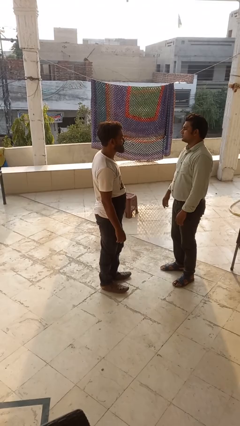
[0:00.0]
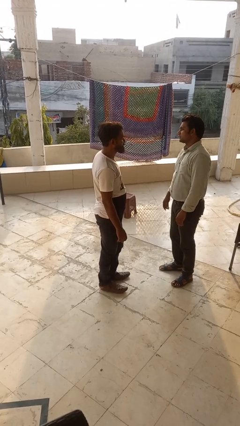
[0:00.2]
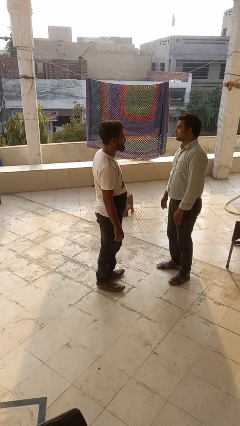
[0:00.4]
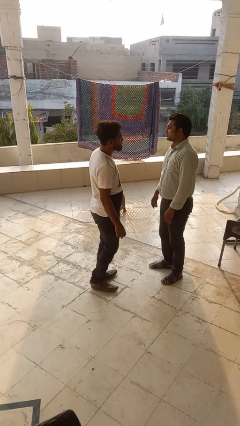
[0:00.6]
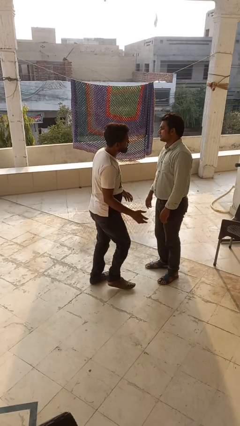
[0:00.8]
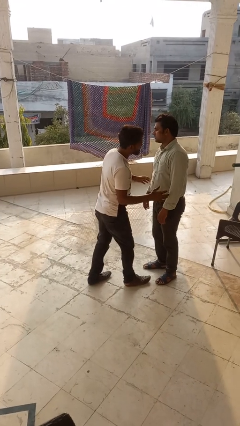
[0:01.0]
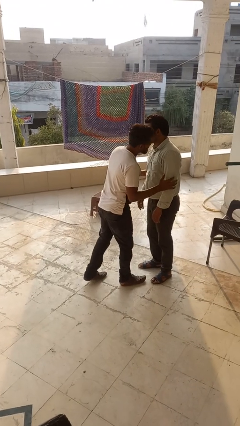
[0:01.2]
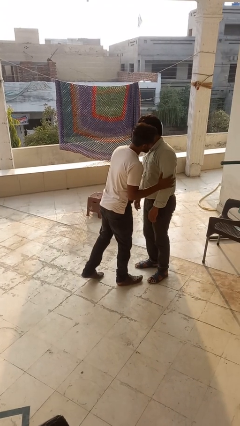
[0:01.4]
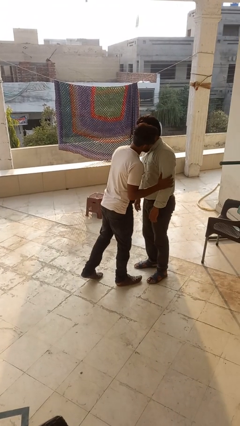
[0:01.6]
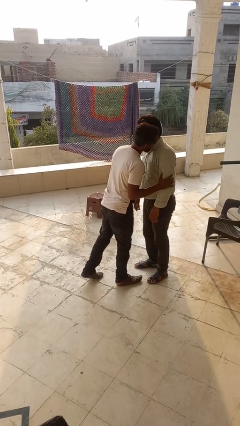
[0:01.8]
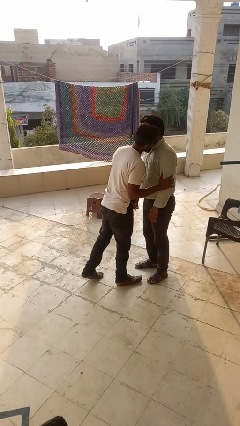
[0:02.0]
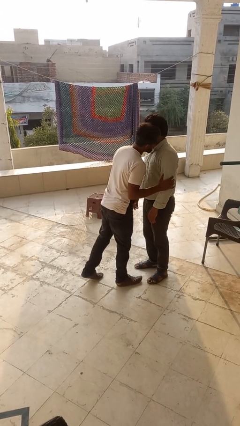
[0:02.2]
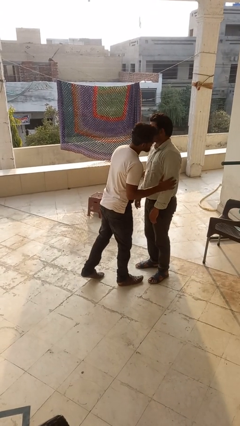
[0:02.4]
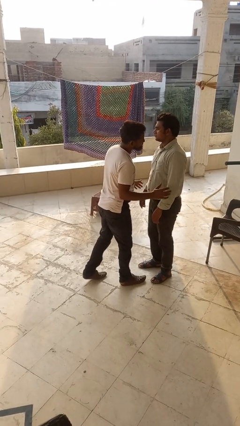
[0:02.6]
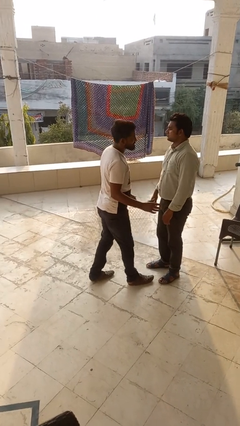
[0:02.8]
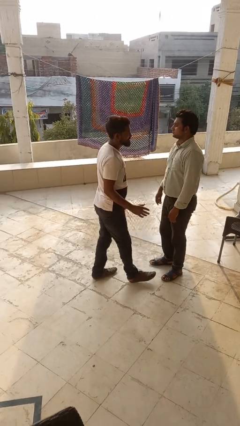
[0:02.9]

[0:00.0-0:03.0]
person kisses cheek of person

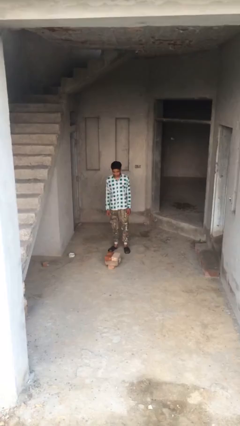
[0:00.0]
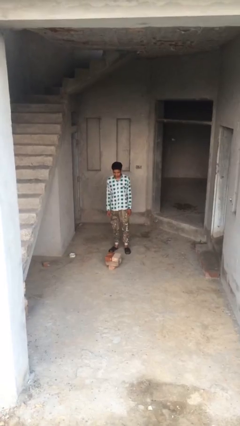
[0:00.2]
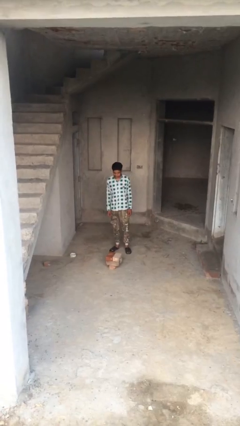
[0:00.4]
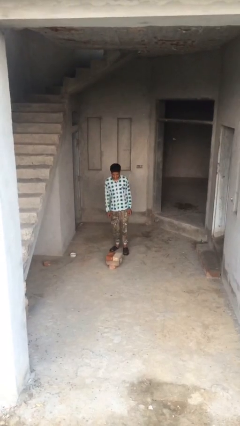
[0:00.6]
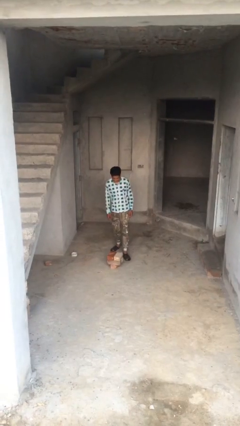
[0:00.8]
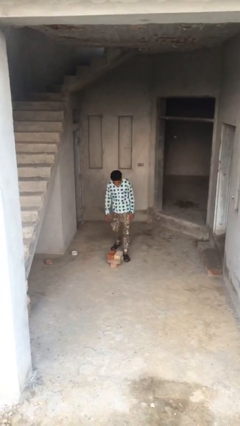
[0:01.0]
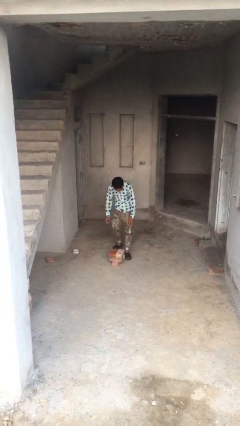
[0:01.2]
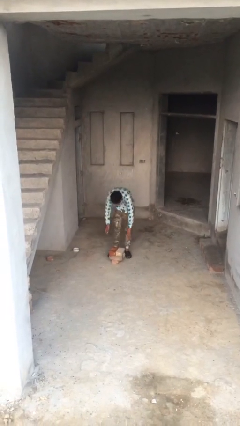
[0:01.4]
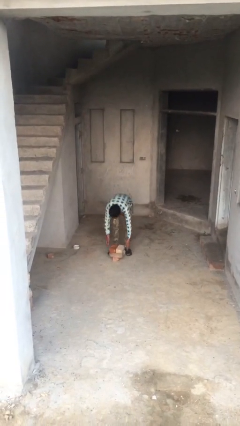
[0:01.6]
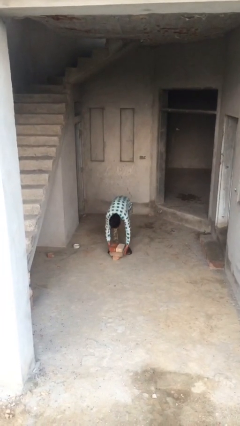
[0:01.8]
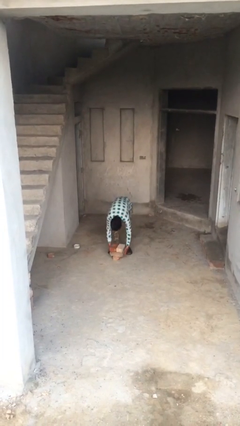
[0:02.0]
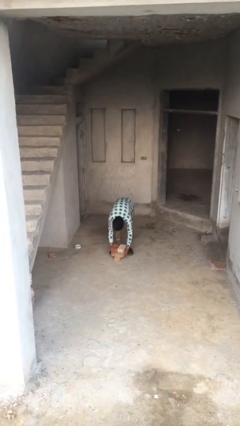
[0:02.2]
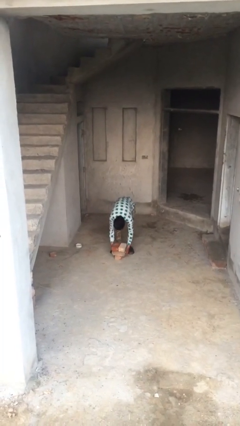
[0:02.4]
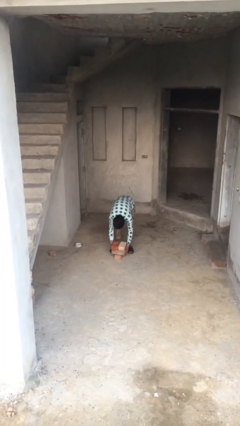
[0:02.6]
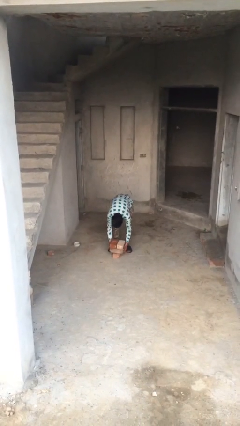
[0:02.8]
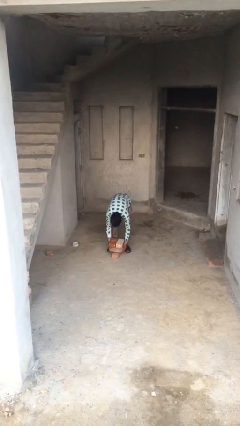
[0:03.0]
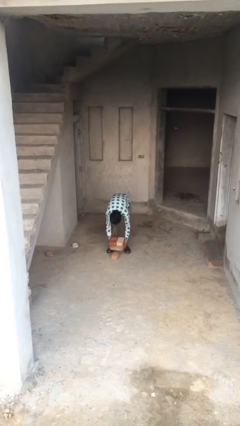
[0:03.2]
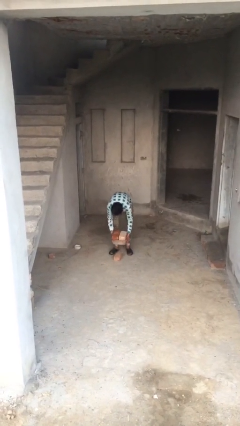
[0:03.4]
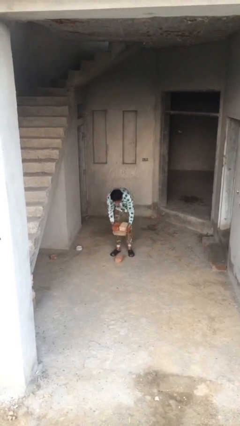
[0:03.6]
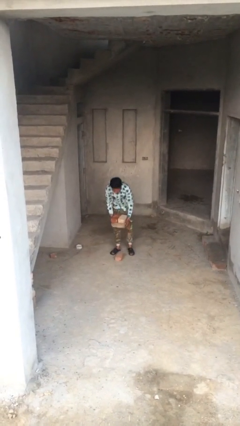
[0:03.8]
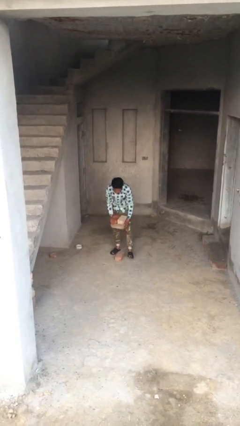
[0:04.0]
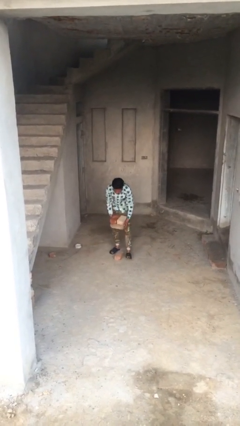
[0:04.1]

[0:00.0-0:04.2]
person picks up object from floor

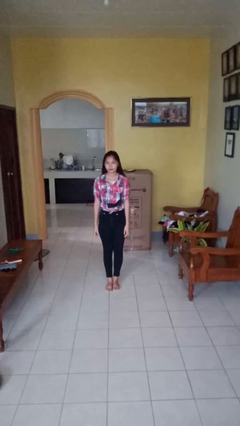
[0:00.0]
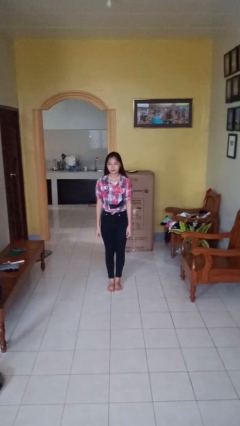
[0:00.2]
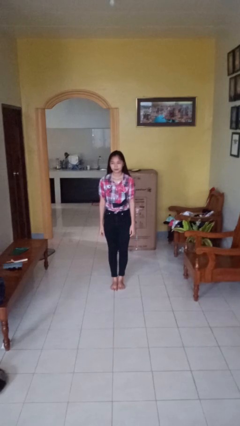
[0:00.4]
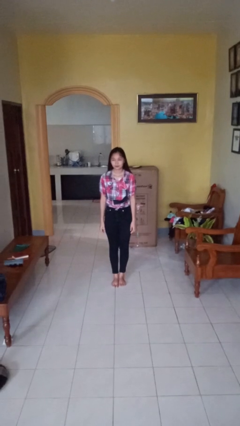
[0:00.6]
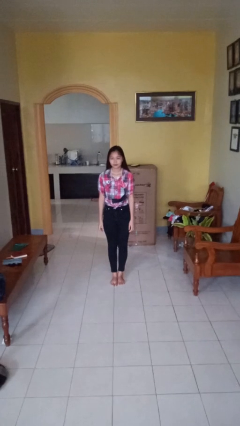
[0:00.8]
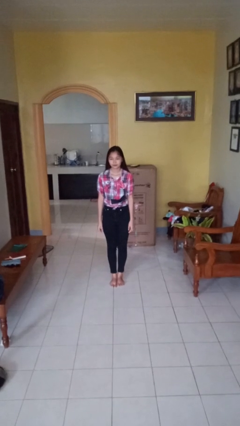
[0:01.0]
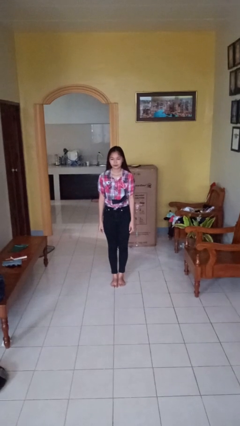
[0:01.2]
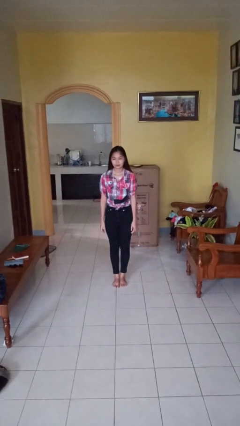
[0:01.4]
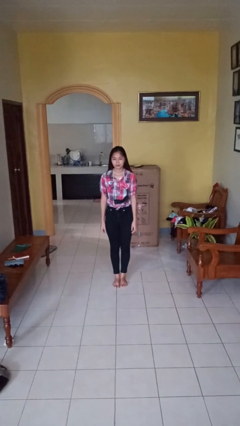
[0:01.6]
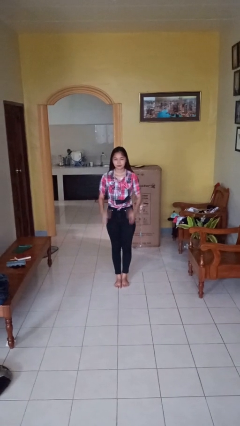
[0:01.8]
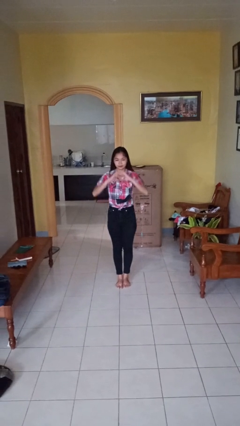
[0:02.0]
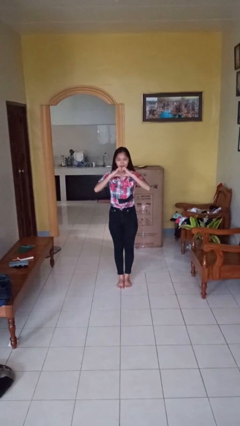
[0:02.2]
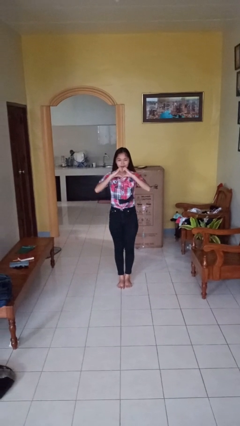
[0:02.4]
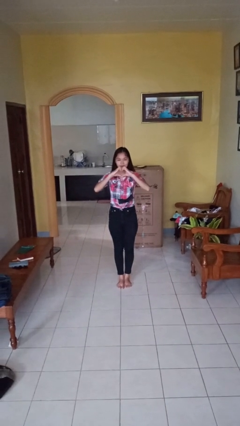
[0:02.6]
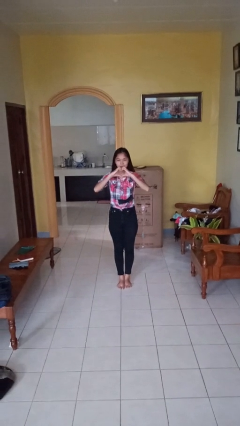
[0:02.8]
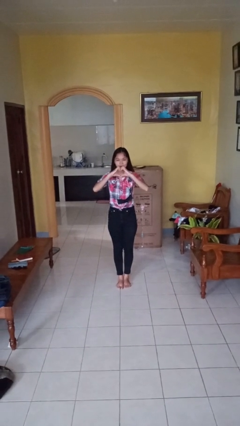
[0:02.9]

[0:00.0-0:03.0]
person gestures heart

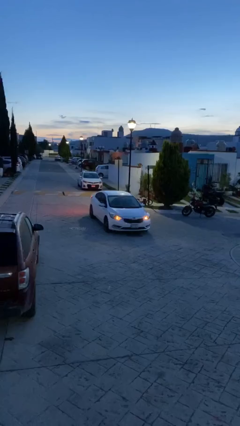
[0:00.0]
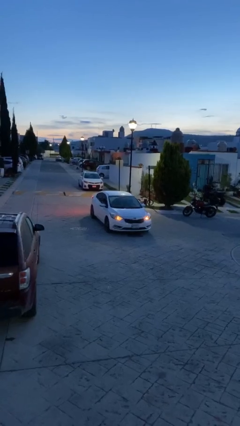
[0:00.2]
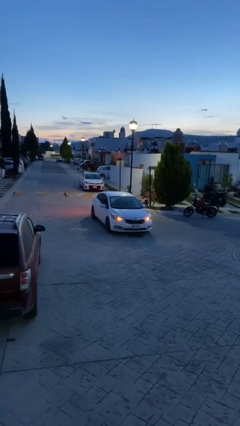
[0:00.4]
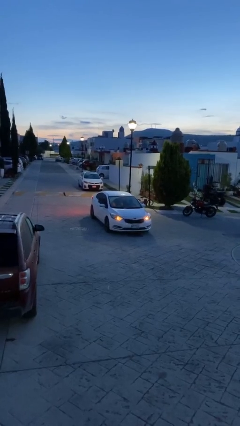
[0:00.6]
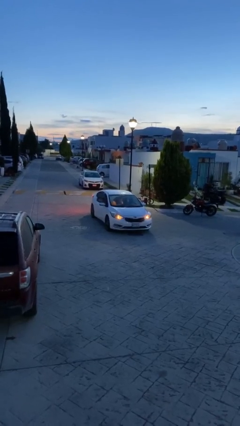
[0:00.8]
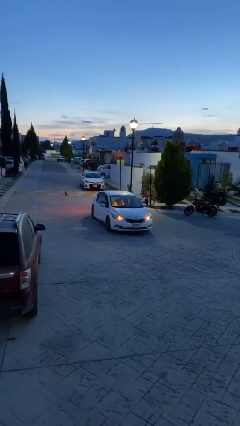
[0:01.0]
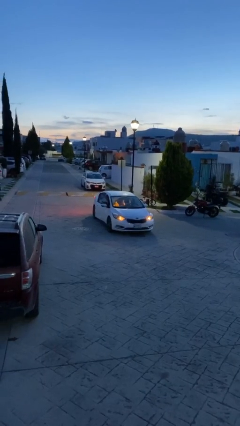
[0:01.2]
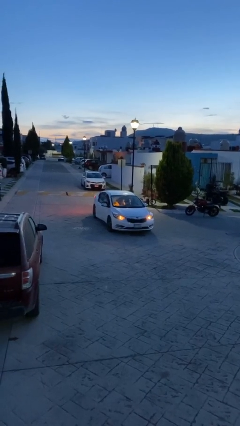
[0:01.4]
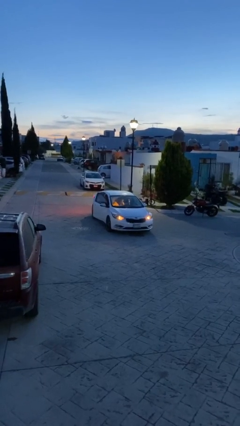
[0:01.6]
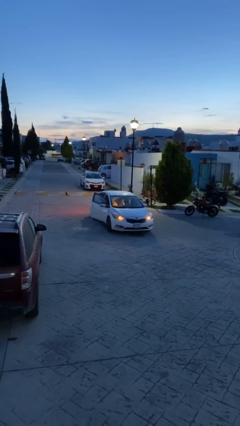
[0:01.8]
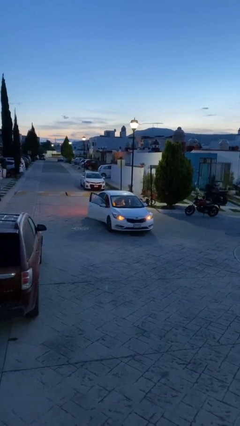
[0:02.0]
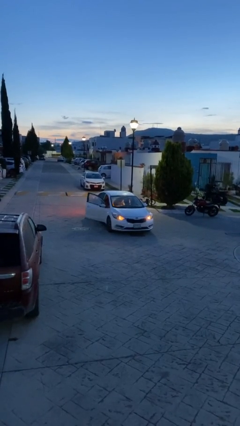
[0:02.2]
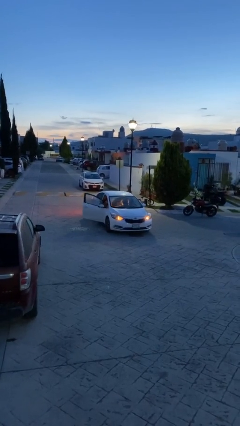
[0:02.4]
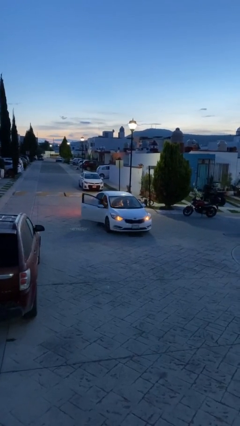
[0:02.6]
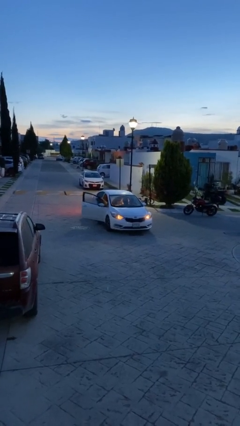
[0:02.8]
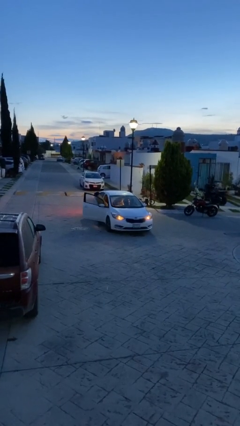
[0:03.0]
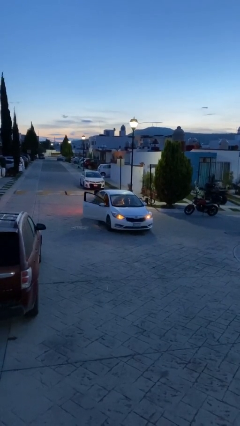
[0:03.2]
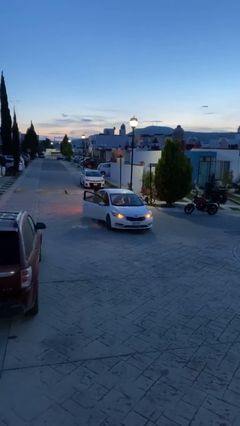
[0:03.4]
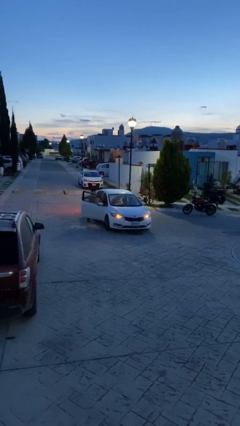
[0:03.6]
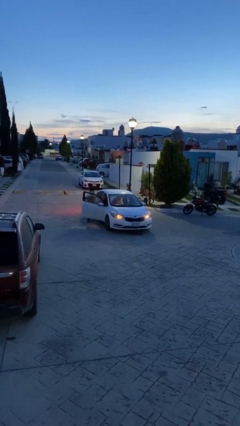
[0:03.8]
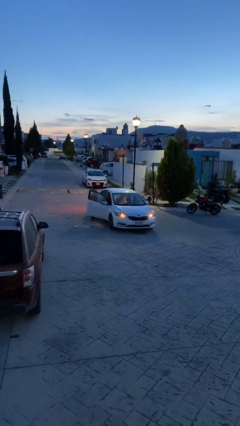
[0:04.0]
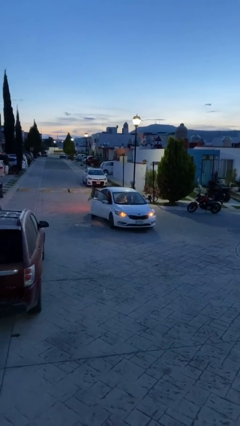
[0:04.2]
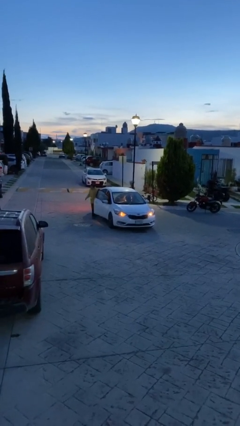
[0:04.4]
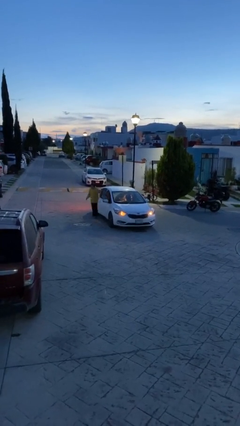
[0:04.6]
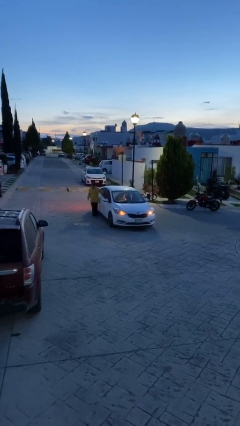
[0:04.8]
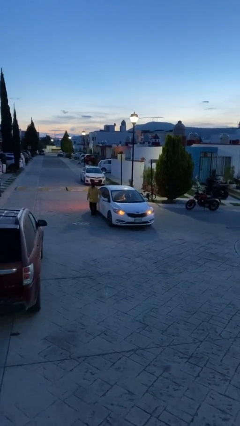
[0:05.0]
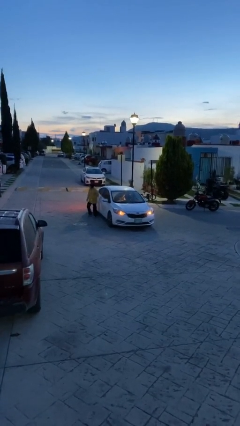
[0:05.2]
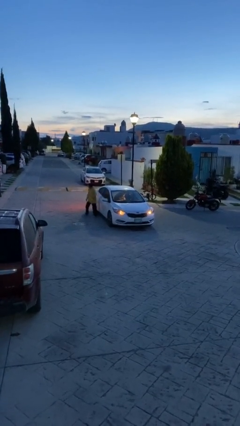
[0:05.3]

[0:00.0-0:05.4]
car drops off person

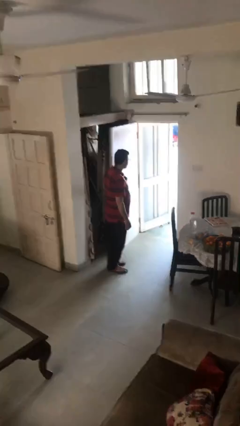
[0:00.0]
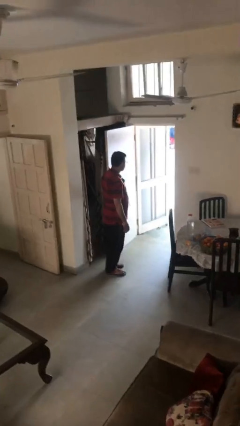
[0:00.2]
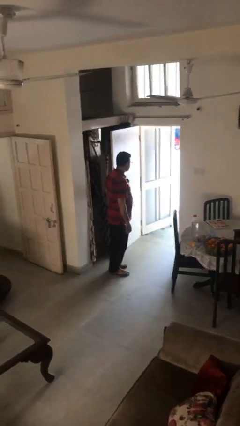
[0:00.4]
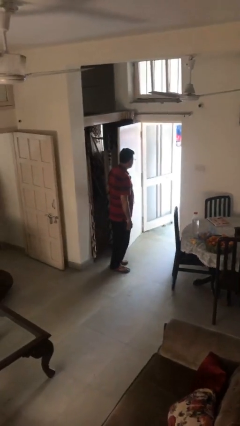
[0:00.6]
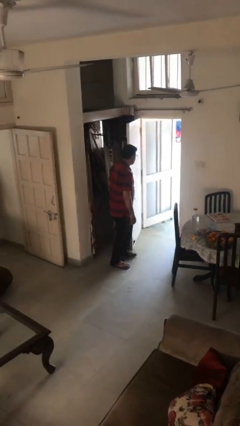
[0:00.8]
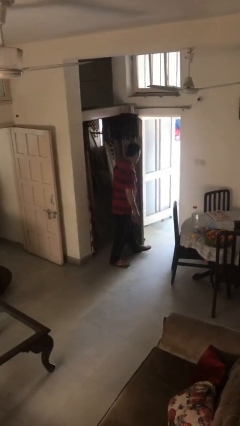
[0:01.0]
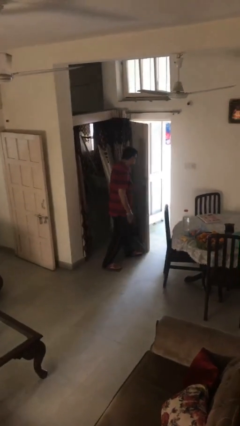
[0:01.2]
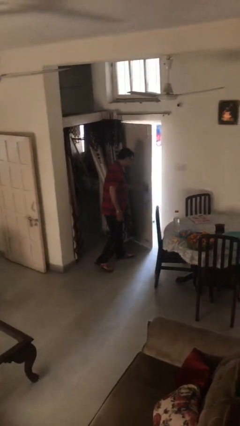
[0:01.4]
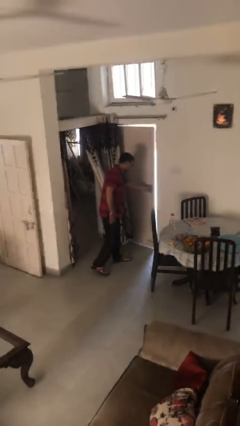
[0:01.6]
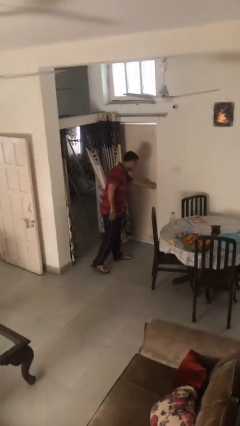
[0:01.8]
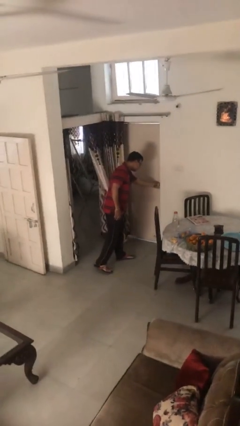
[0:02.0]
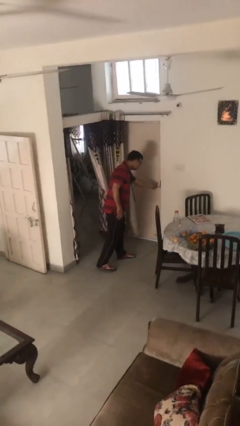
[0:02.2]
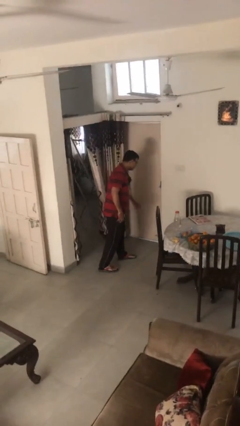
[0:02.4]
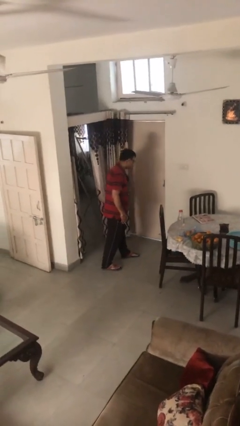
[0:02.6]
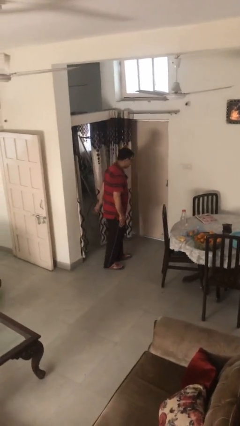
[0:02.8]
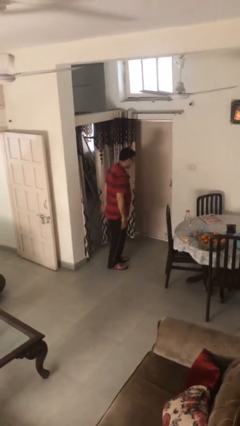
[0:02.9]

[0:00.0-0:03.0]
person closes facility door
